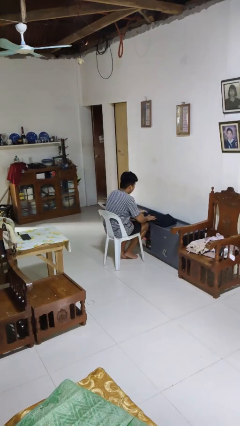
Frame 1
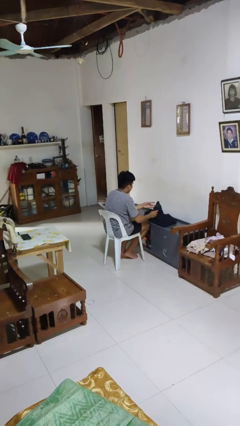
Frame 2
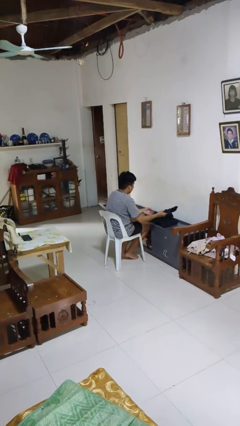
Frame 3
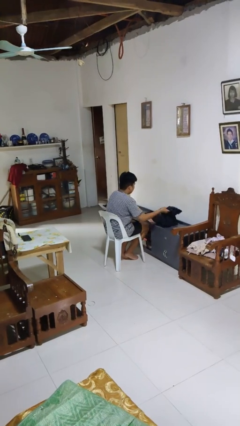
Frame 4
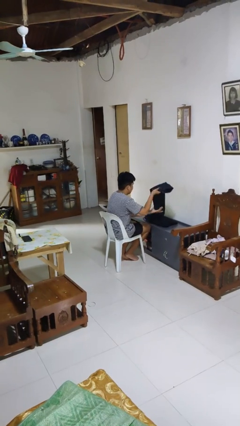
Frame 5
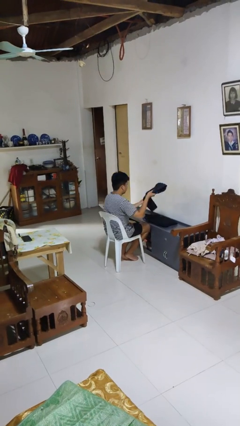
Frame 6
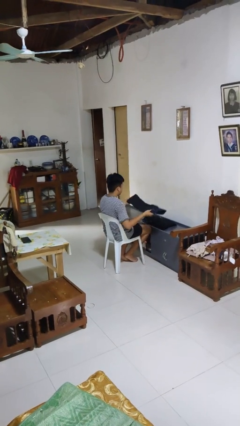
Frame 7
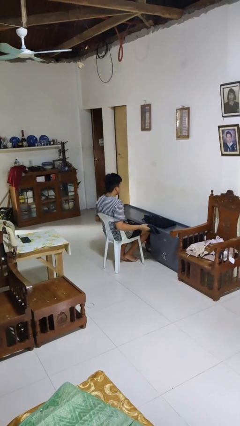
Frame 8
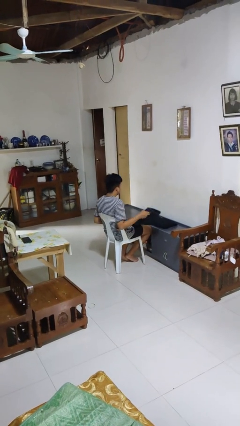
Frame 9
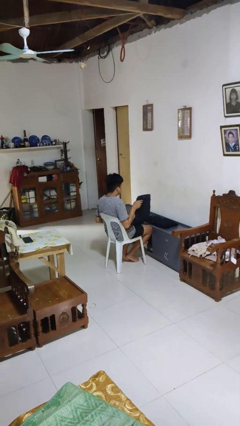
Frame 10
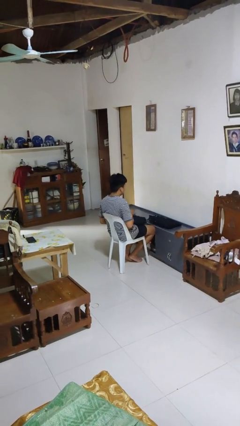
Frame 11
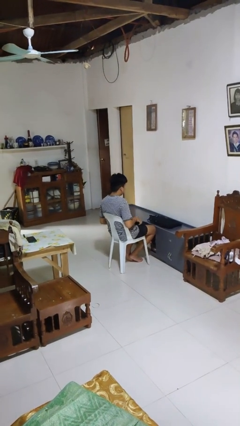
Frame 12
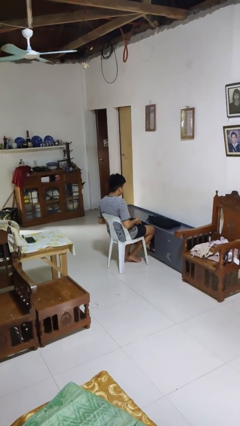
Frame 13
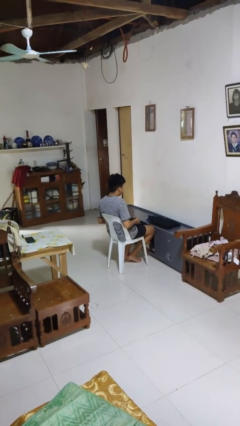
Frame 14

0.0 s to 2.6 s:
person folds pants

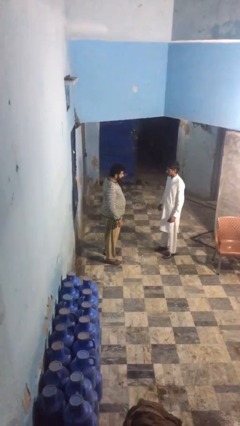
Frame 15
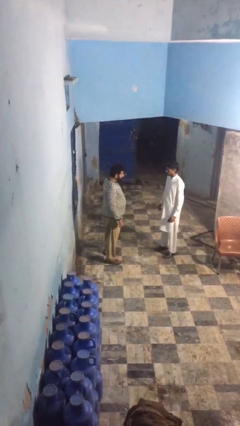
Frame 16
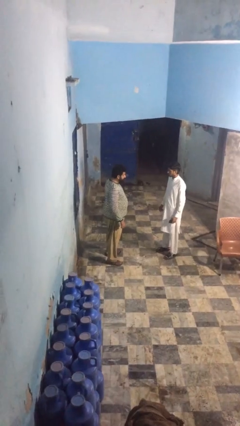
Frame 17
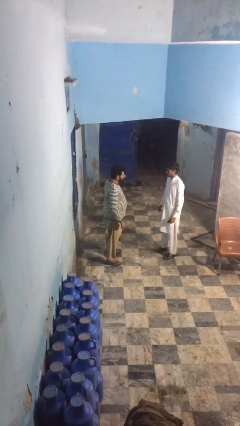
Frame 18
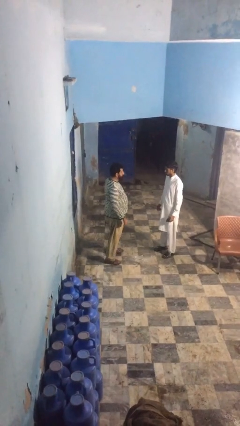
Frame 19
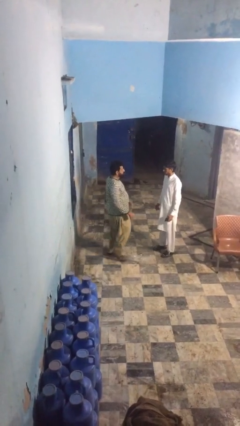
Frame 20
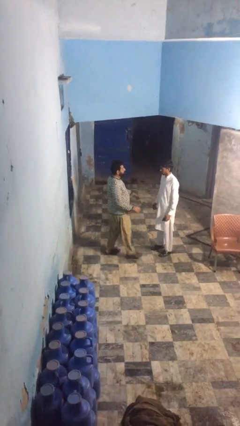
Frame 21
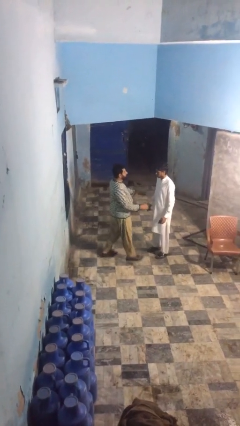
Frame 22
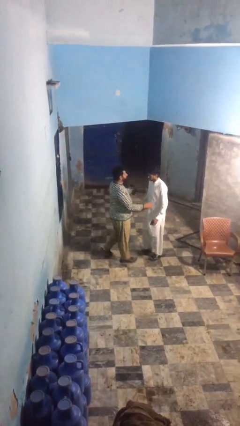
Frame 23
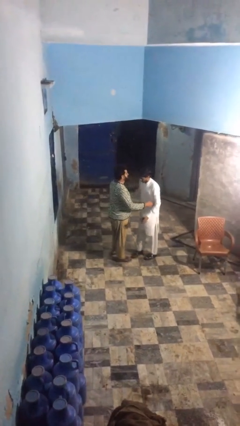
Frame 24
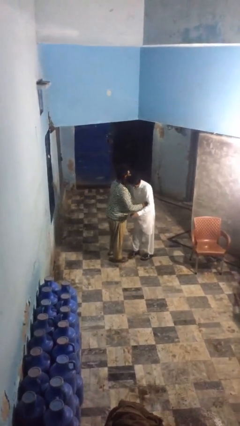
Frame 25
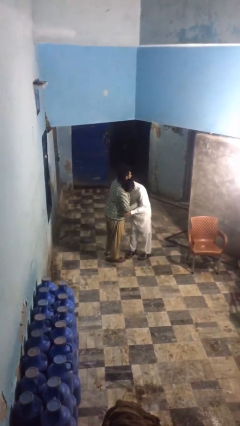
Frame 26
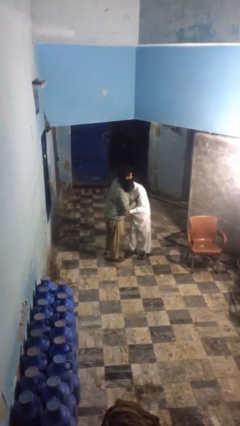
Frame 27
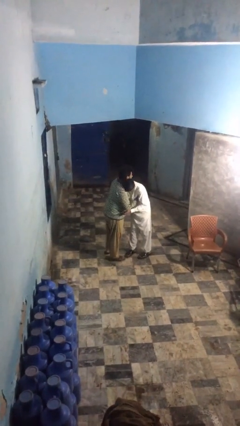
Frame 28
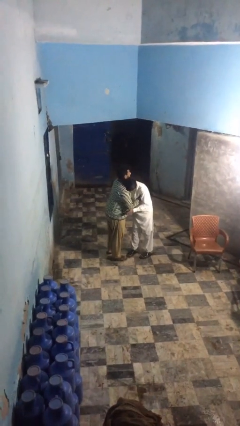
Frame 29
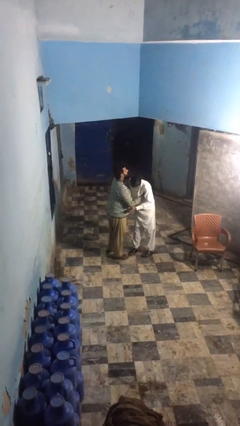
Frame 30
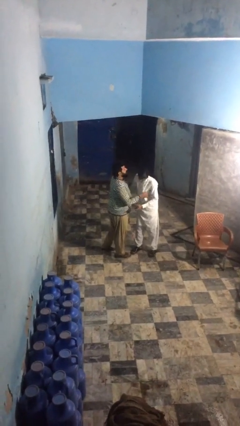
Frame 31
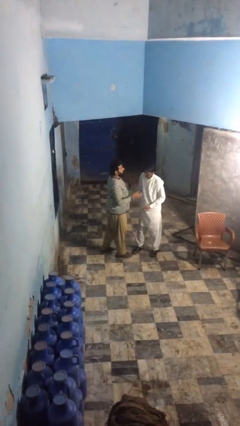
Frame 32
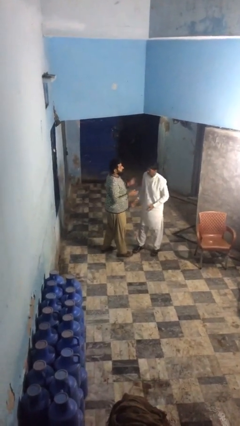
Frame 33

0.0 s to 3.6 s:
person embraces person

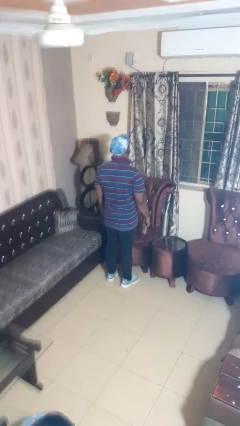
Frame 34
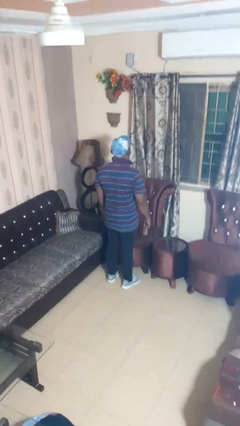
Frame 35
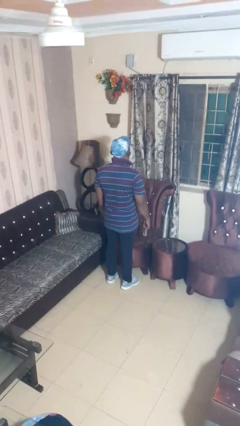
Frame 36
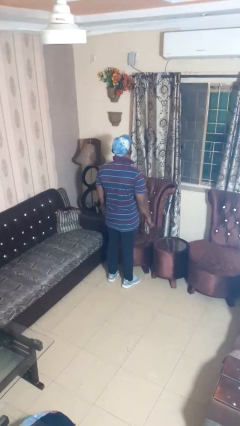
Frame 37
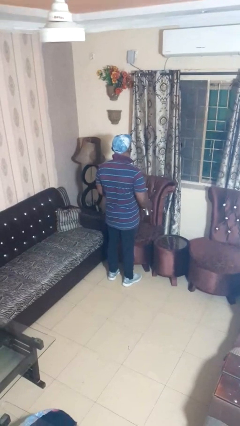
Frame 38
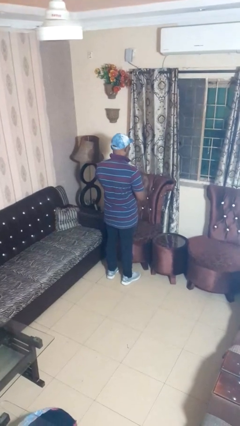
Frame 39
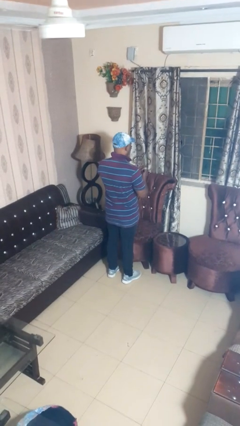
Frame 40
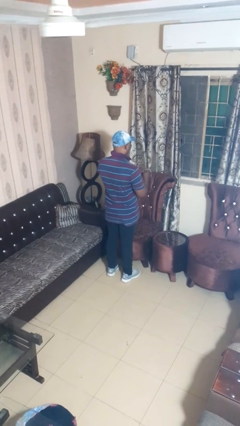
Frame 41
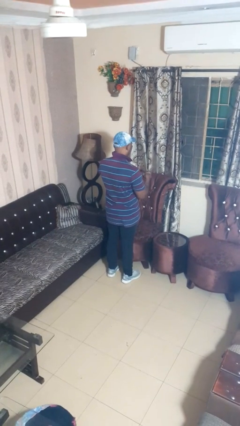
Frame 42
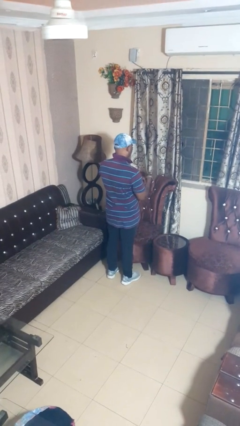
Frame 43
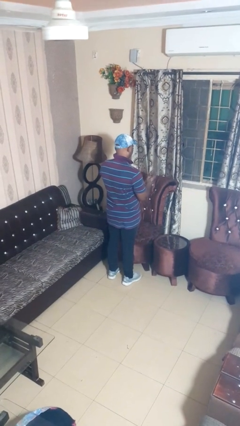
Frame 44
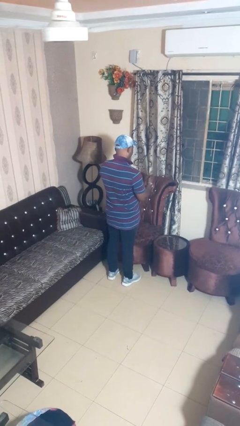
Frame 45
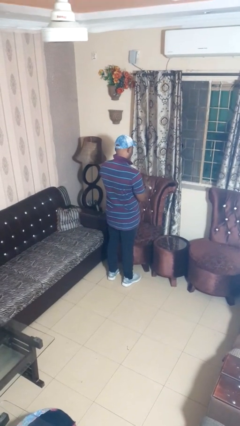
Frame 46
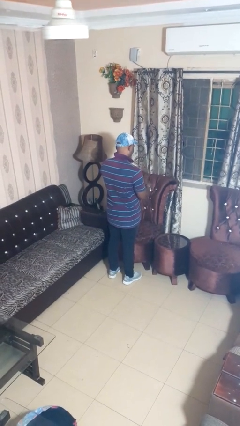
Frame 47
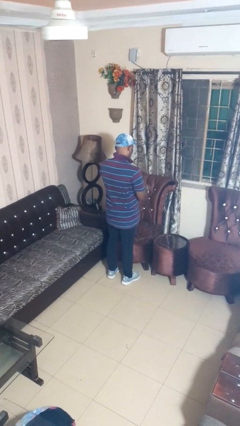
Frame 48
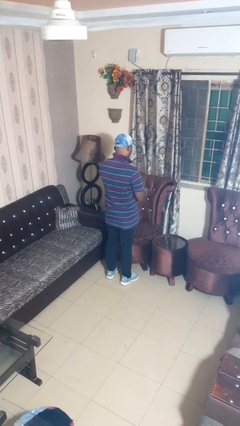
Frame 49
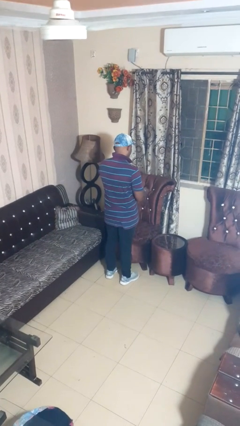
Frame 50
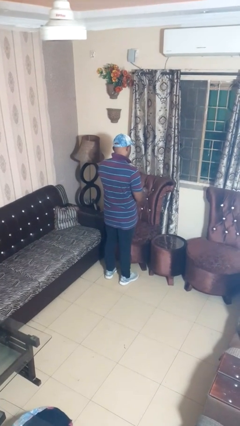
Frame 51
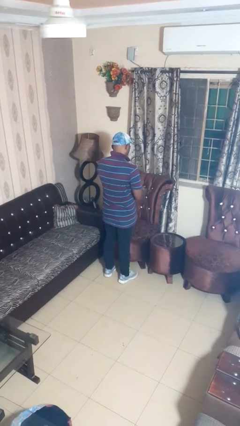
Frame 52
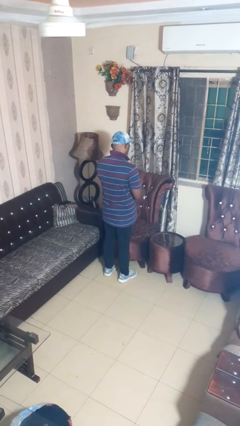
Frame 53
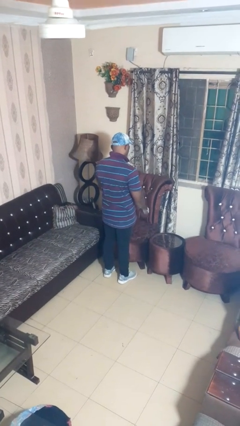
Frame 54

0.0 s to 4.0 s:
person puts on wristwatch

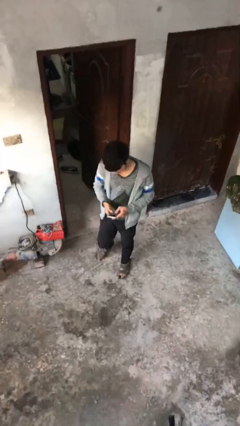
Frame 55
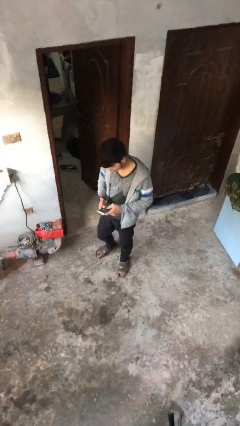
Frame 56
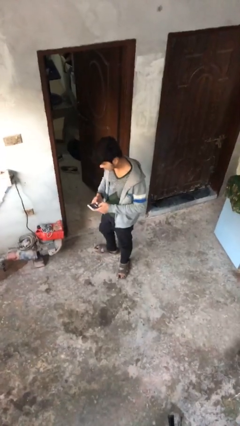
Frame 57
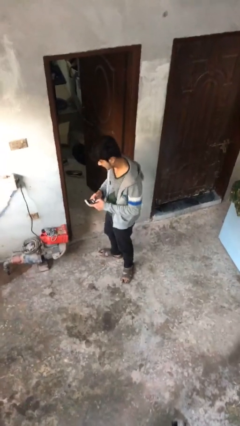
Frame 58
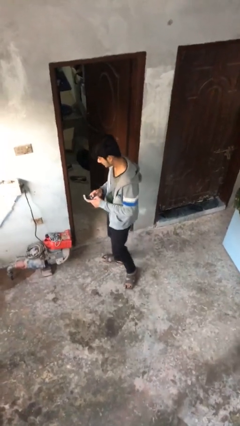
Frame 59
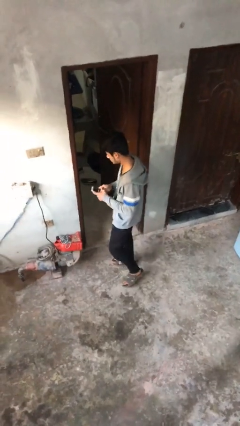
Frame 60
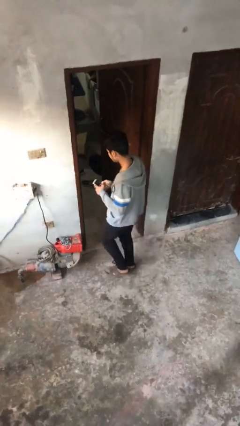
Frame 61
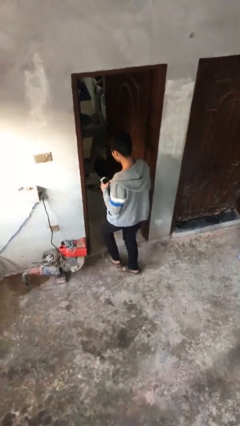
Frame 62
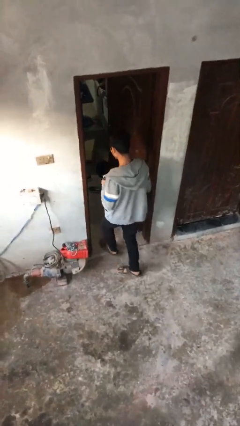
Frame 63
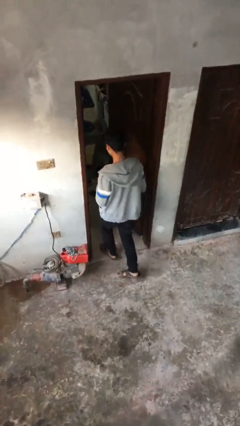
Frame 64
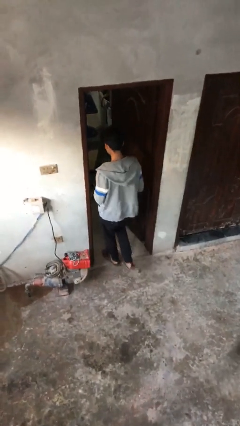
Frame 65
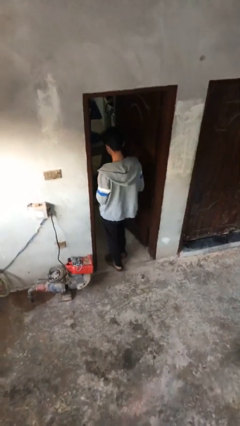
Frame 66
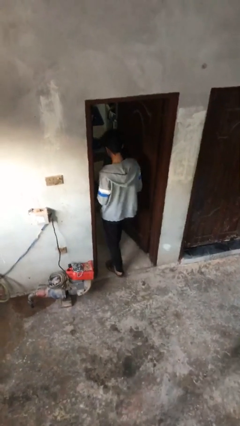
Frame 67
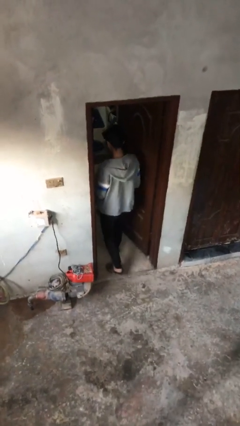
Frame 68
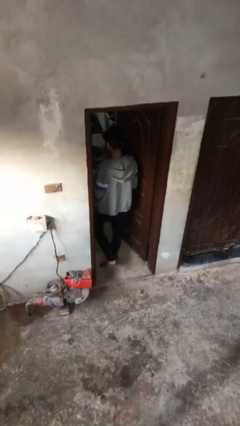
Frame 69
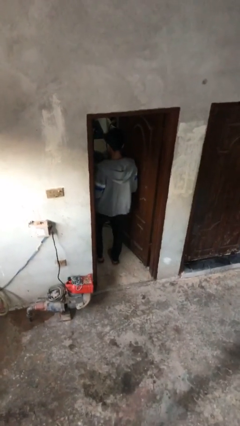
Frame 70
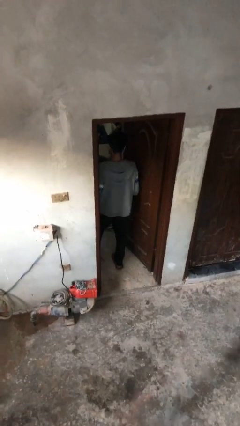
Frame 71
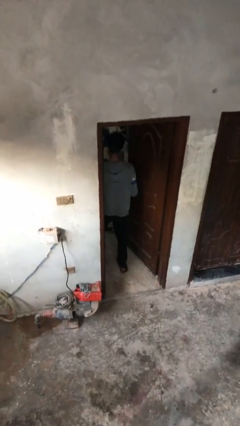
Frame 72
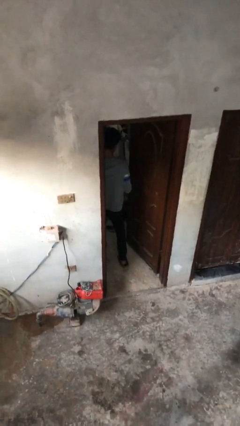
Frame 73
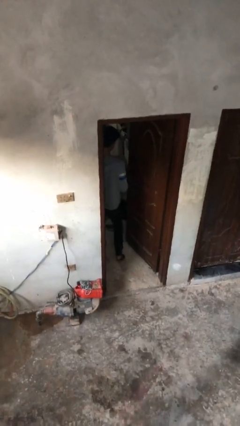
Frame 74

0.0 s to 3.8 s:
person enters scene through structure

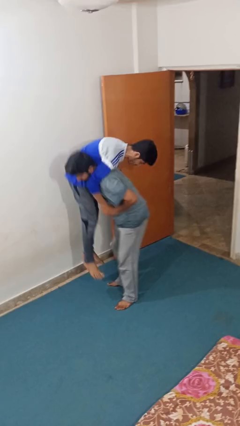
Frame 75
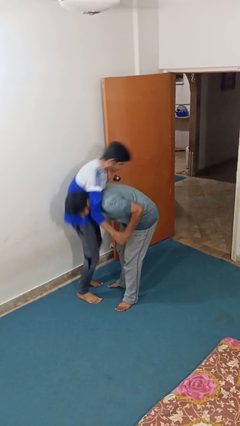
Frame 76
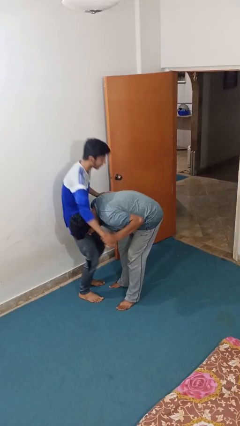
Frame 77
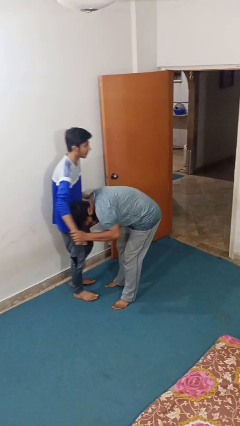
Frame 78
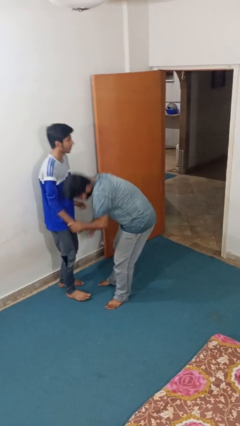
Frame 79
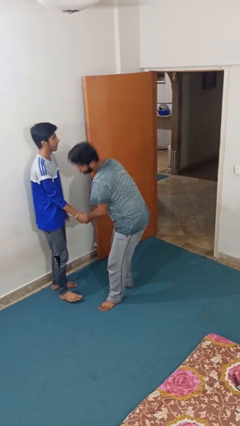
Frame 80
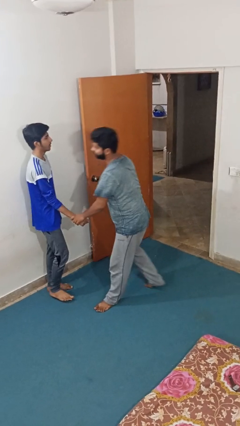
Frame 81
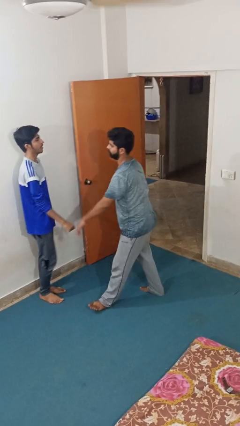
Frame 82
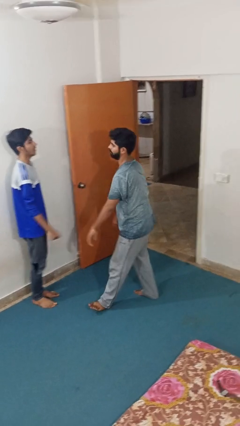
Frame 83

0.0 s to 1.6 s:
person puts down person

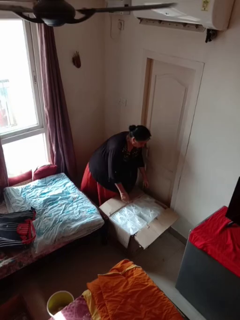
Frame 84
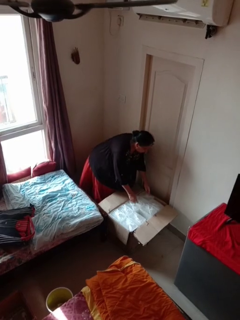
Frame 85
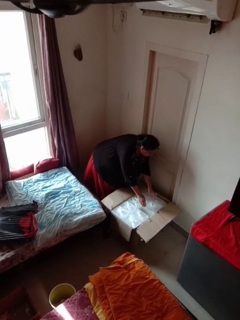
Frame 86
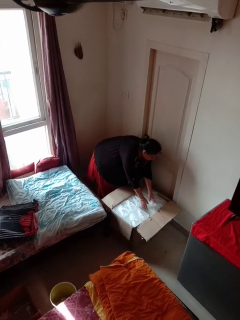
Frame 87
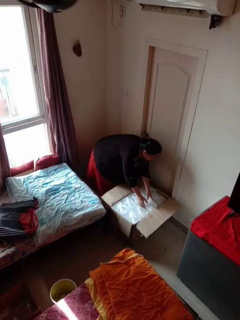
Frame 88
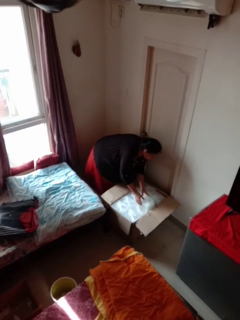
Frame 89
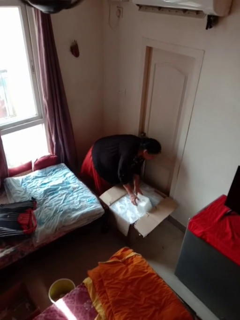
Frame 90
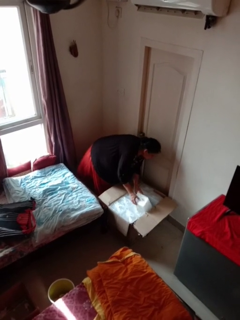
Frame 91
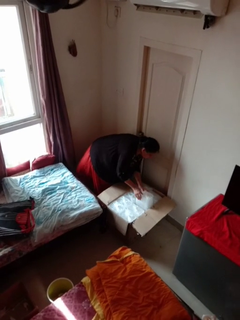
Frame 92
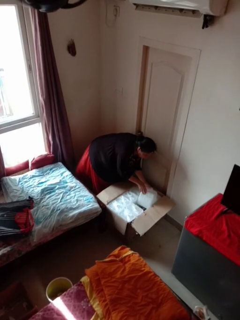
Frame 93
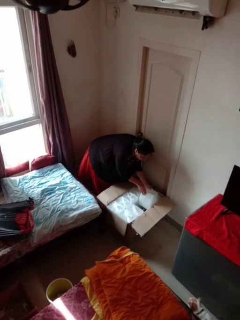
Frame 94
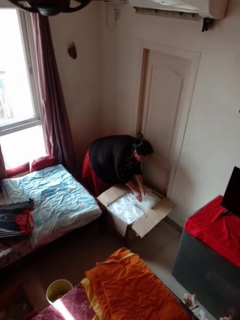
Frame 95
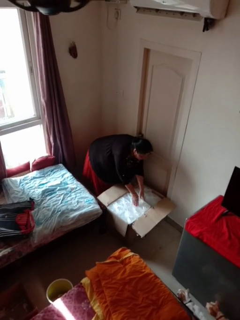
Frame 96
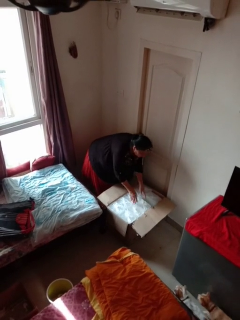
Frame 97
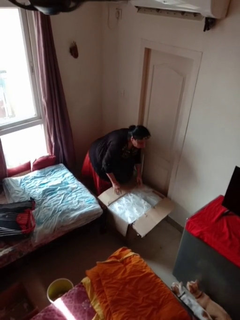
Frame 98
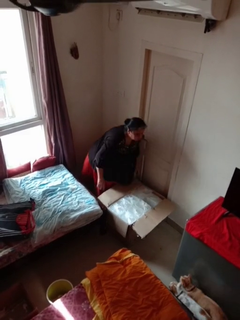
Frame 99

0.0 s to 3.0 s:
person searches in box
